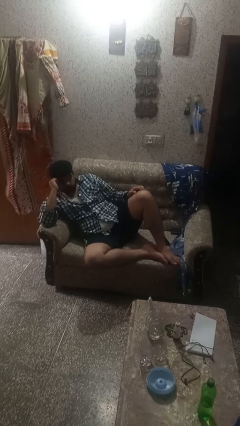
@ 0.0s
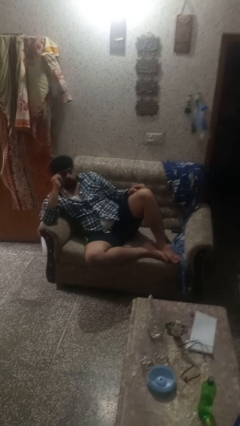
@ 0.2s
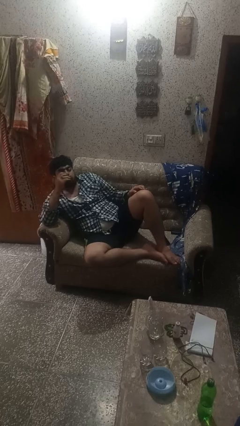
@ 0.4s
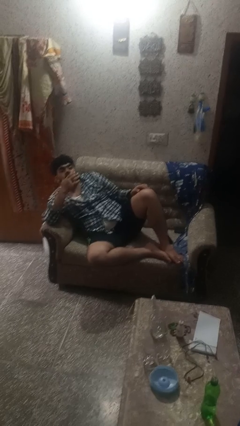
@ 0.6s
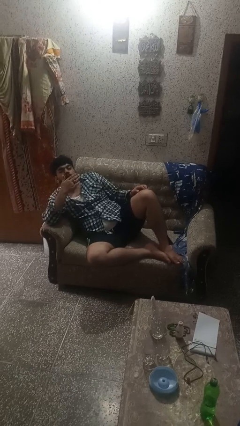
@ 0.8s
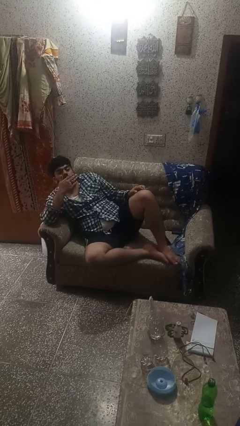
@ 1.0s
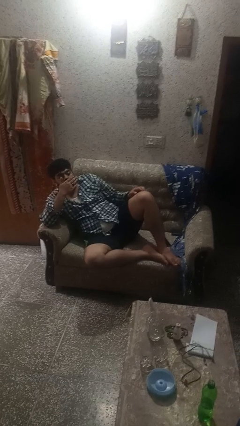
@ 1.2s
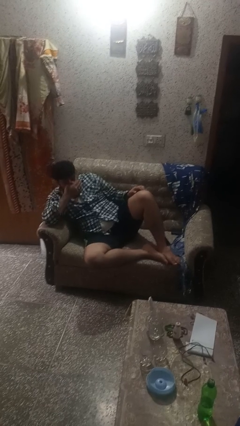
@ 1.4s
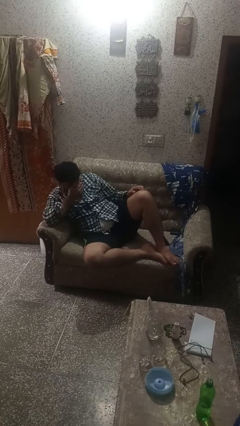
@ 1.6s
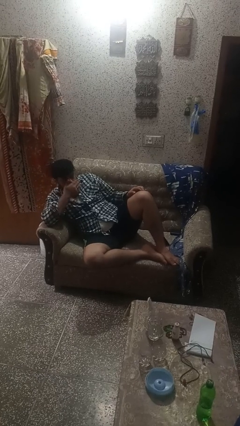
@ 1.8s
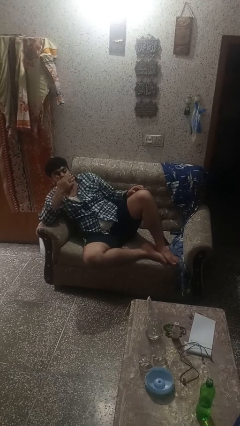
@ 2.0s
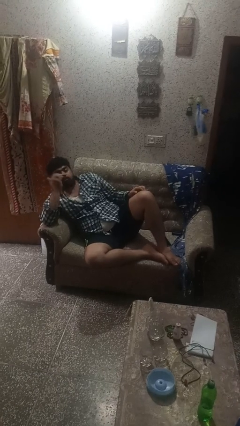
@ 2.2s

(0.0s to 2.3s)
person sneezes into hand

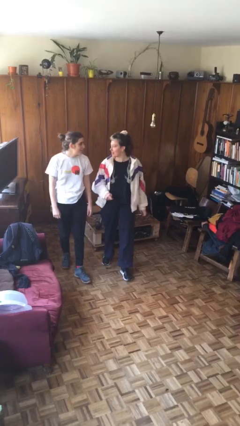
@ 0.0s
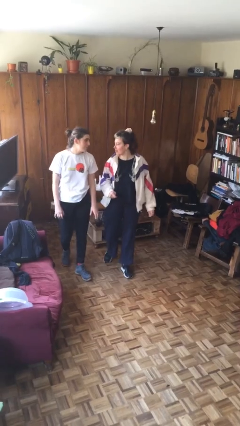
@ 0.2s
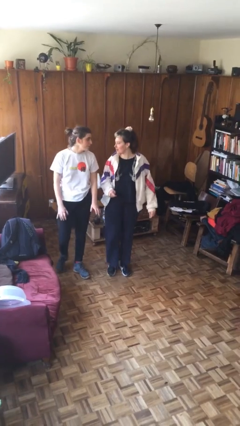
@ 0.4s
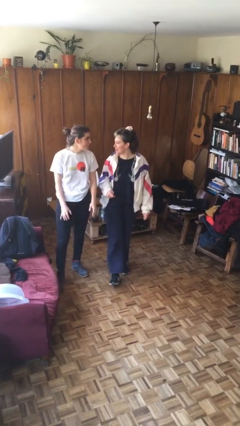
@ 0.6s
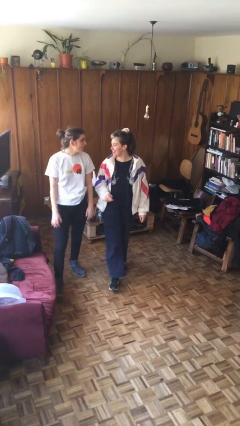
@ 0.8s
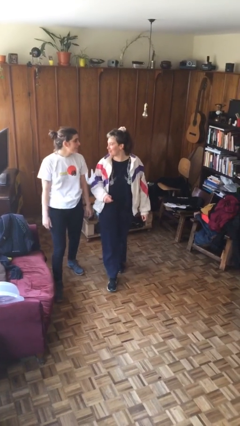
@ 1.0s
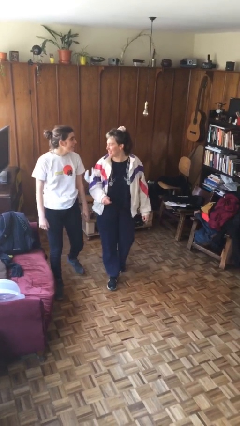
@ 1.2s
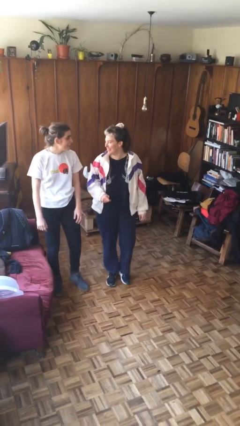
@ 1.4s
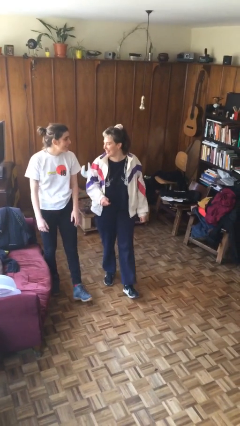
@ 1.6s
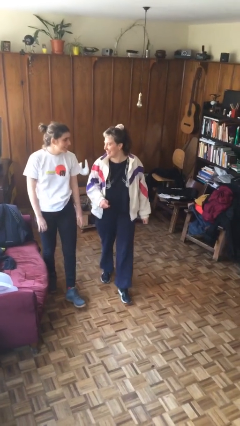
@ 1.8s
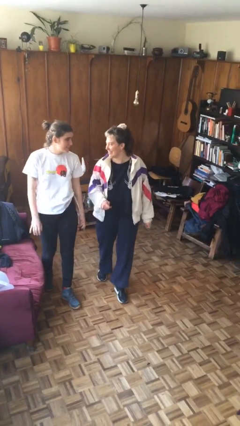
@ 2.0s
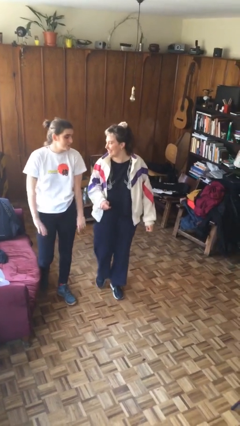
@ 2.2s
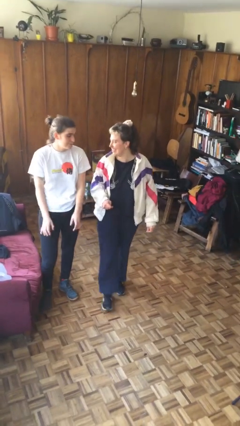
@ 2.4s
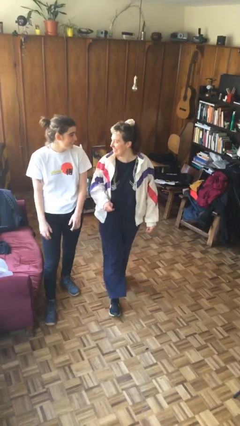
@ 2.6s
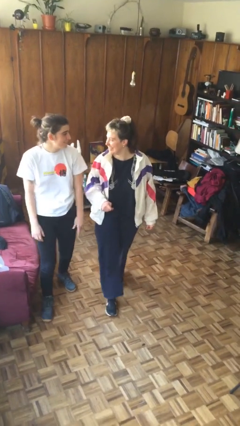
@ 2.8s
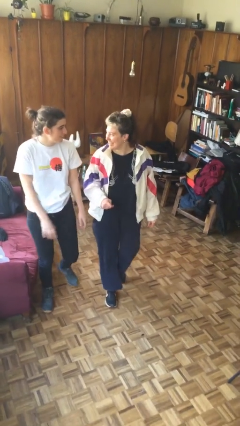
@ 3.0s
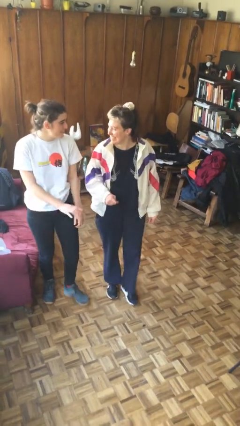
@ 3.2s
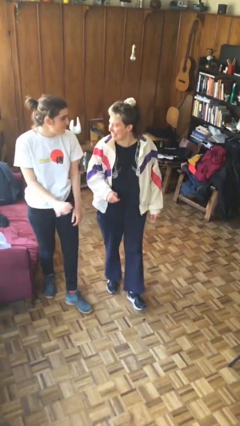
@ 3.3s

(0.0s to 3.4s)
person talks to person

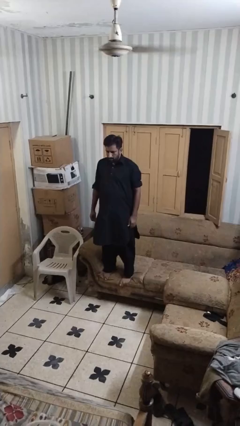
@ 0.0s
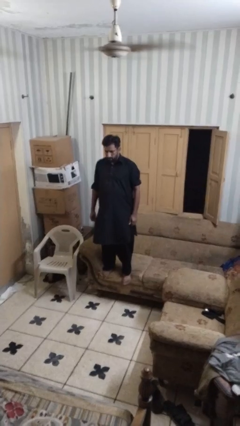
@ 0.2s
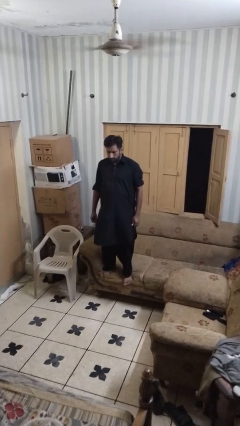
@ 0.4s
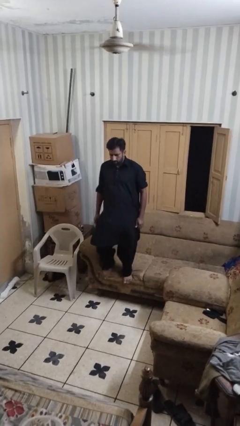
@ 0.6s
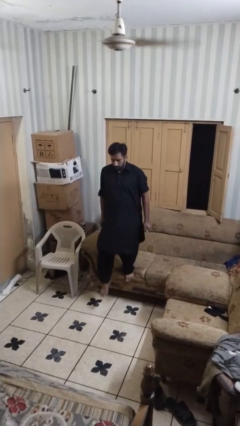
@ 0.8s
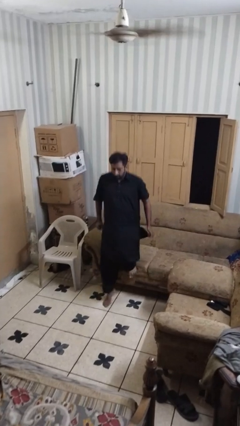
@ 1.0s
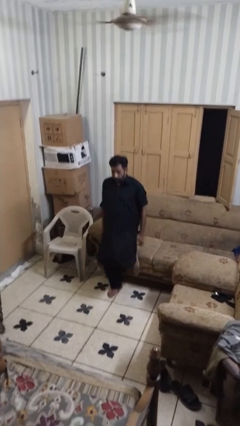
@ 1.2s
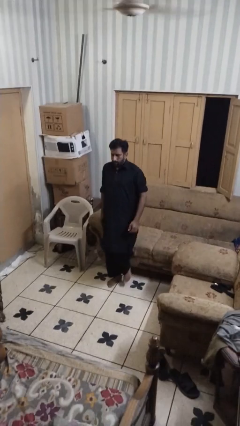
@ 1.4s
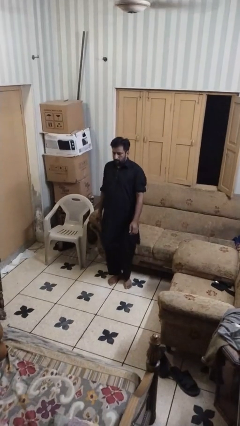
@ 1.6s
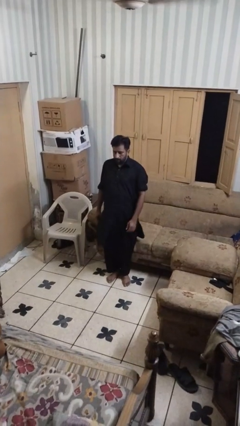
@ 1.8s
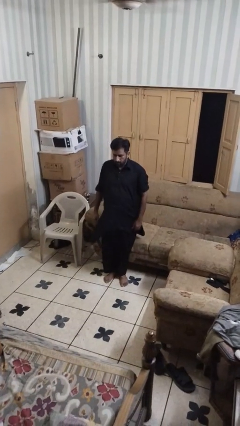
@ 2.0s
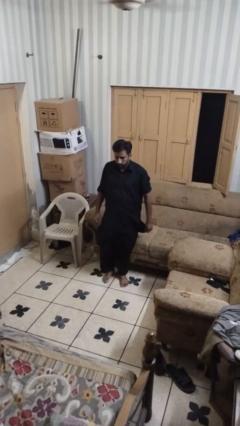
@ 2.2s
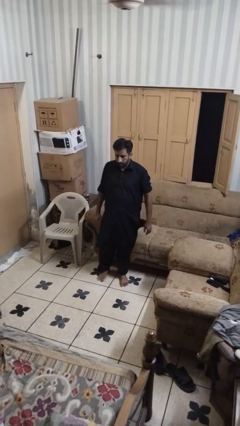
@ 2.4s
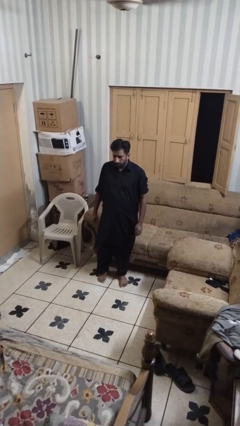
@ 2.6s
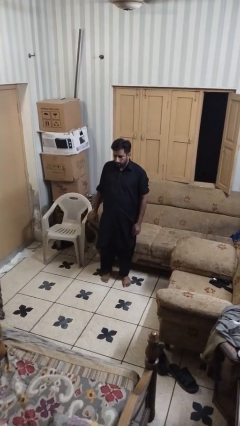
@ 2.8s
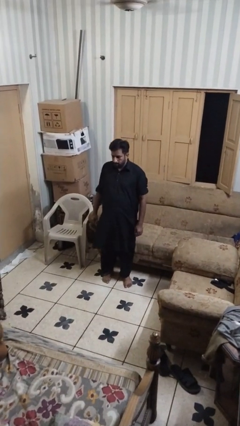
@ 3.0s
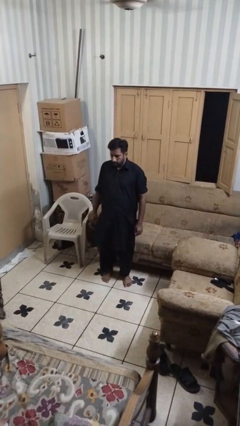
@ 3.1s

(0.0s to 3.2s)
person climbs off couch

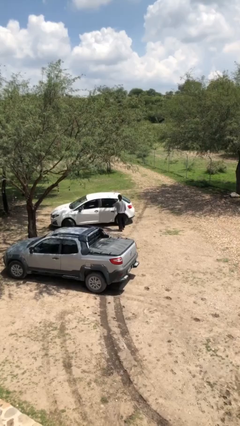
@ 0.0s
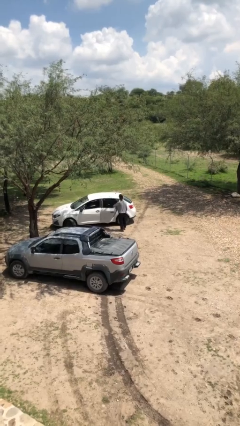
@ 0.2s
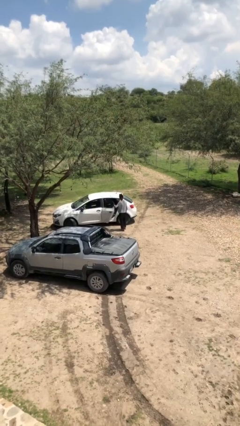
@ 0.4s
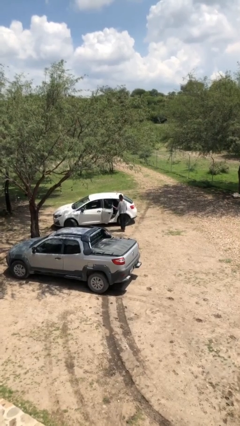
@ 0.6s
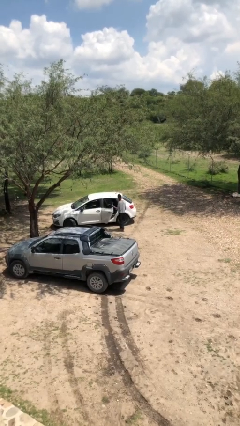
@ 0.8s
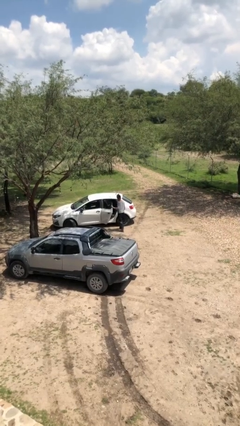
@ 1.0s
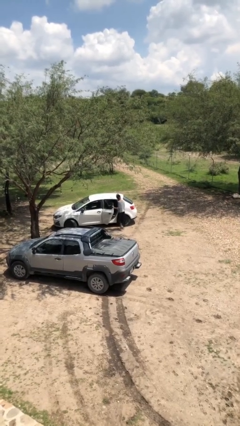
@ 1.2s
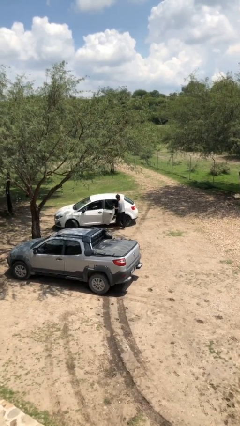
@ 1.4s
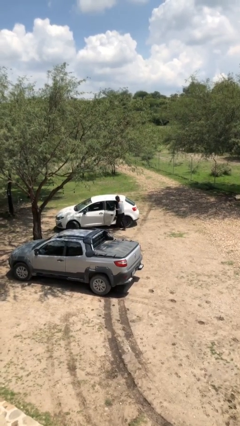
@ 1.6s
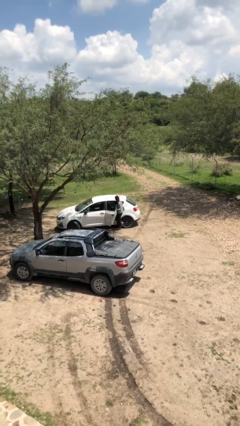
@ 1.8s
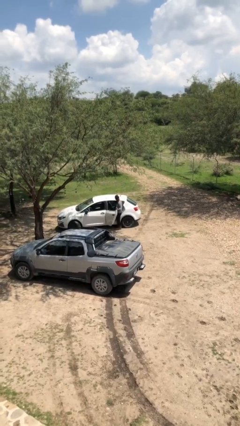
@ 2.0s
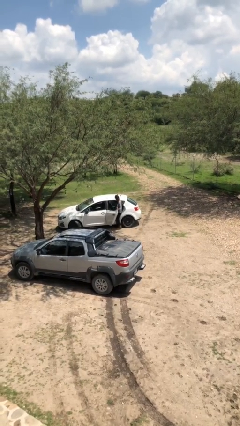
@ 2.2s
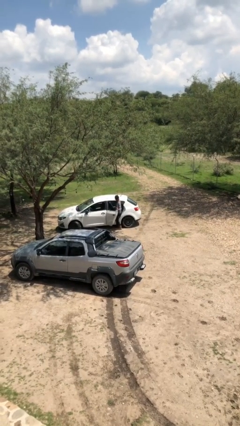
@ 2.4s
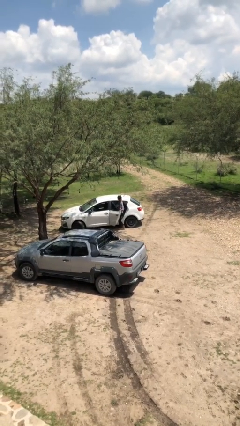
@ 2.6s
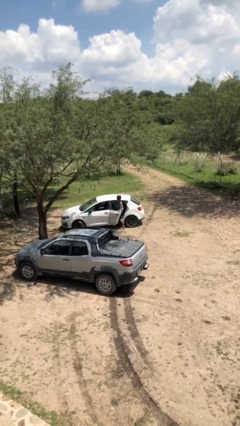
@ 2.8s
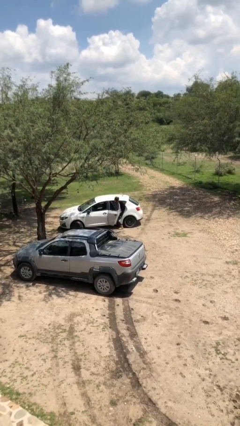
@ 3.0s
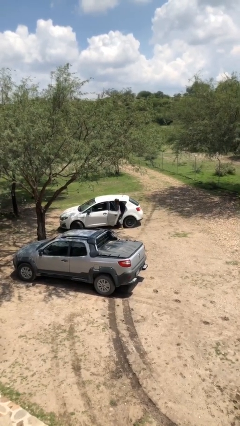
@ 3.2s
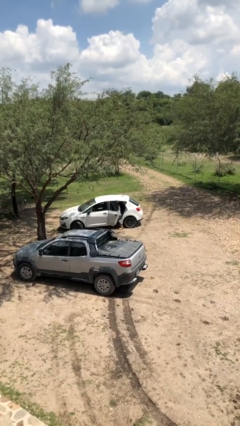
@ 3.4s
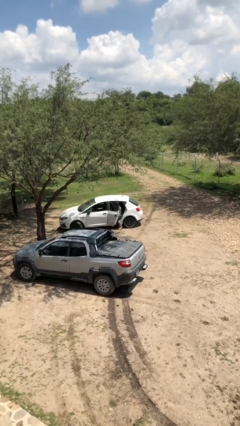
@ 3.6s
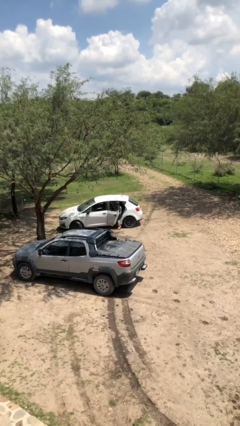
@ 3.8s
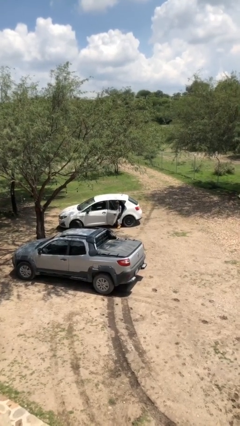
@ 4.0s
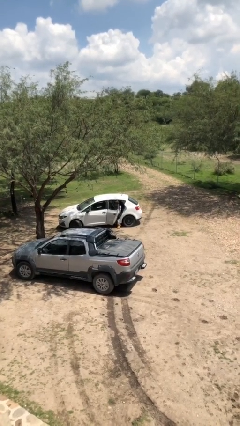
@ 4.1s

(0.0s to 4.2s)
person enters car

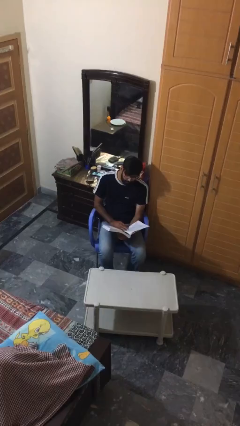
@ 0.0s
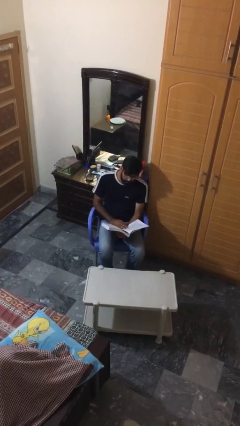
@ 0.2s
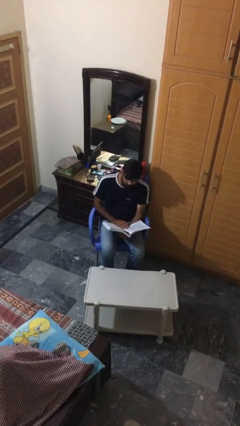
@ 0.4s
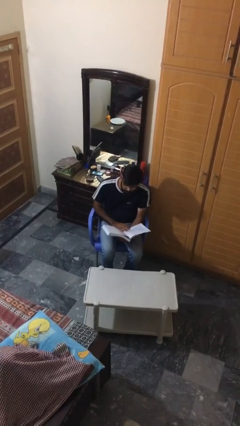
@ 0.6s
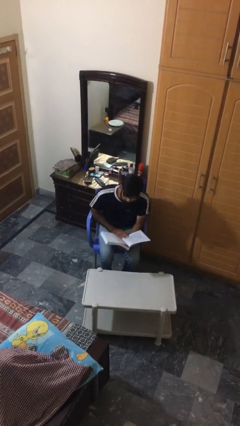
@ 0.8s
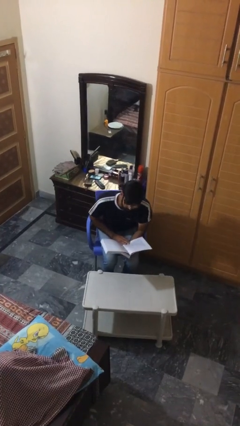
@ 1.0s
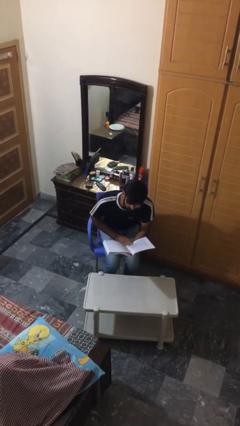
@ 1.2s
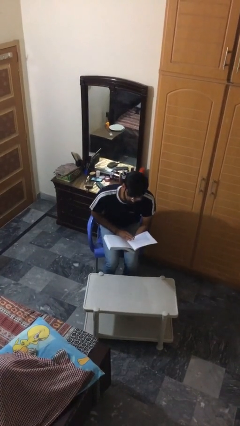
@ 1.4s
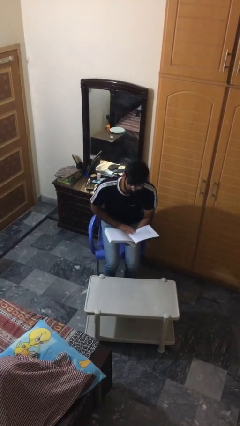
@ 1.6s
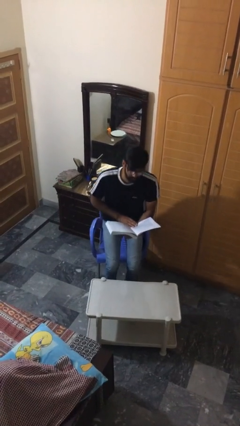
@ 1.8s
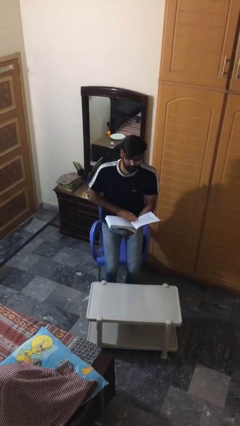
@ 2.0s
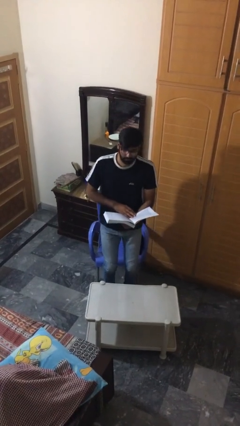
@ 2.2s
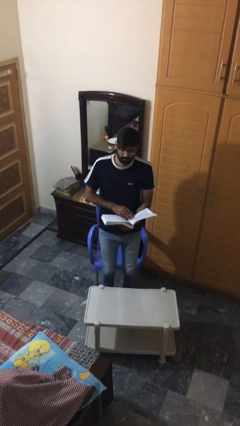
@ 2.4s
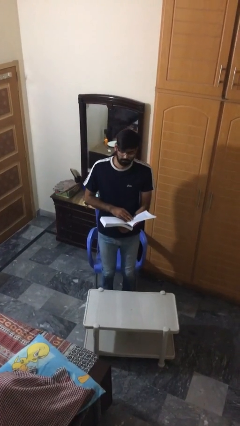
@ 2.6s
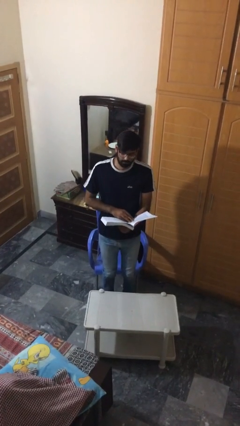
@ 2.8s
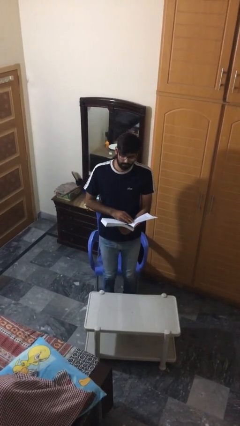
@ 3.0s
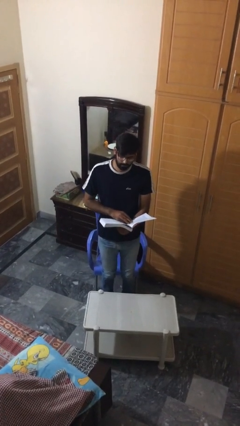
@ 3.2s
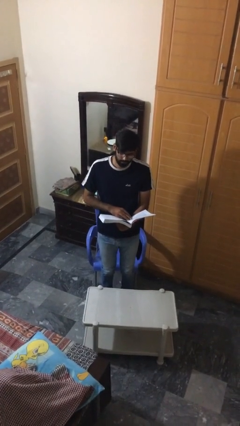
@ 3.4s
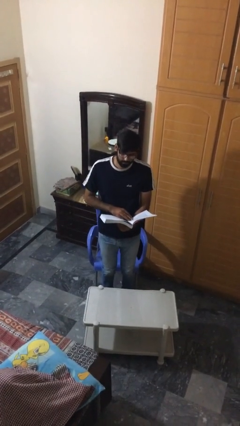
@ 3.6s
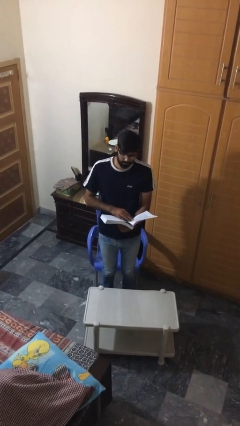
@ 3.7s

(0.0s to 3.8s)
person stands up

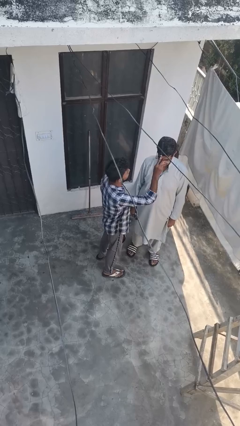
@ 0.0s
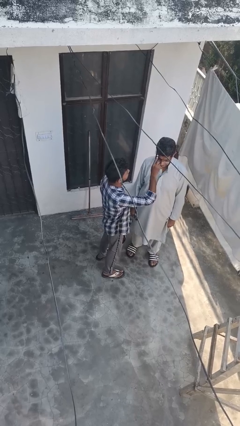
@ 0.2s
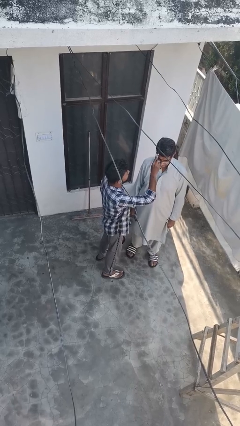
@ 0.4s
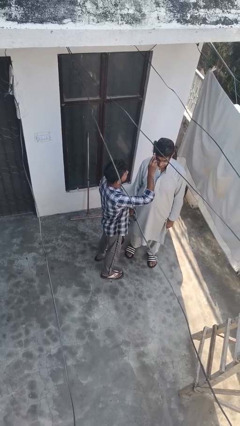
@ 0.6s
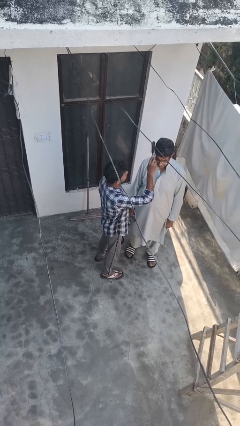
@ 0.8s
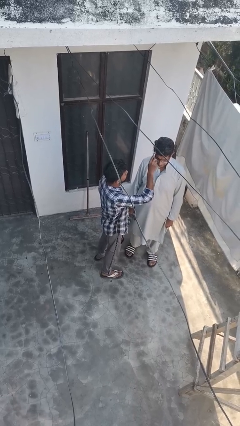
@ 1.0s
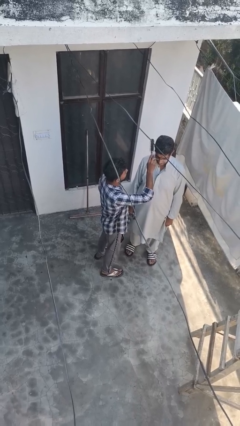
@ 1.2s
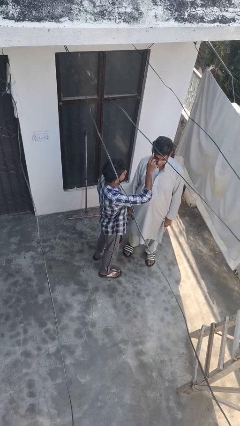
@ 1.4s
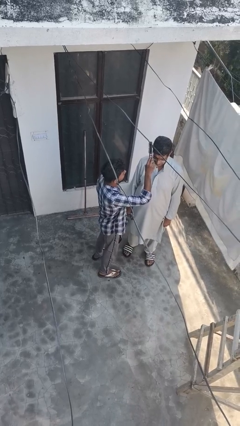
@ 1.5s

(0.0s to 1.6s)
person brushes hair of person
